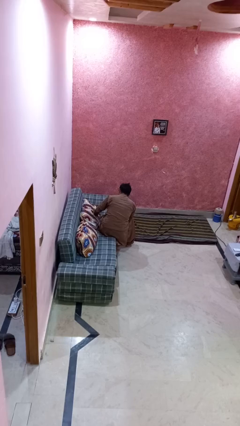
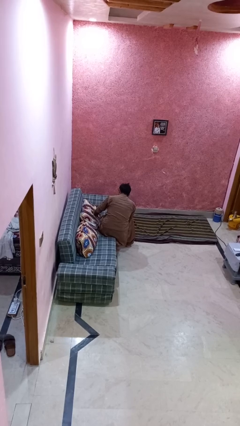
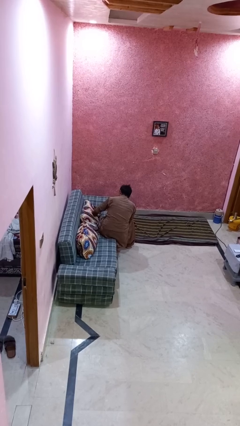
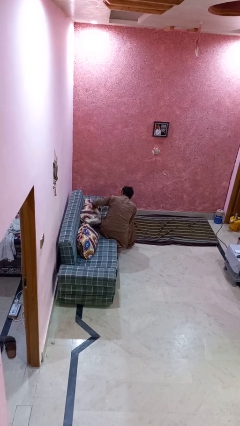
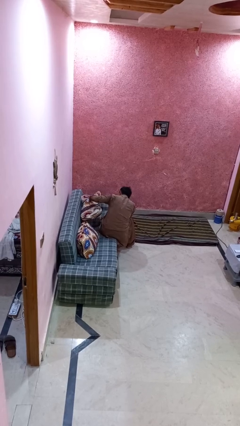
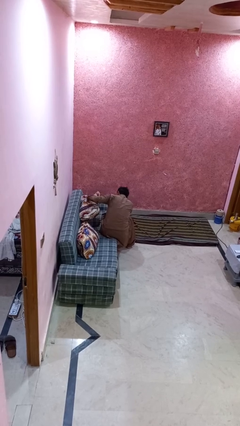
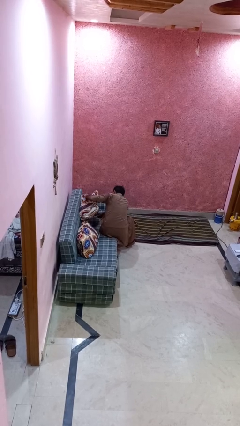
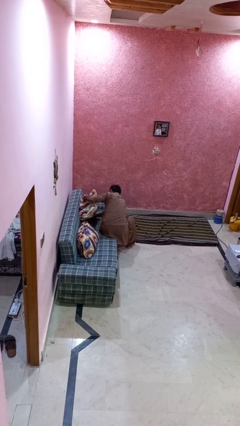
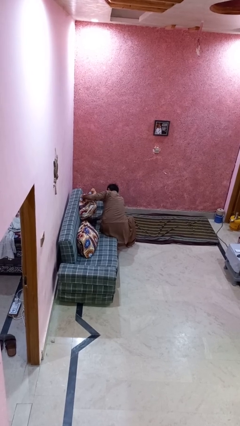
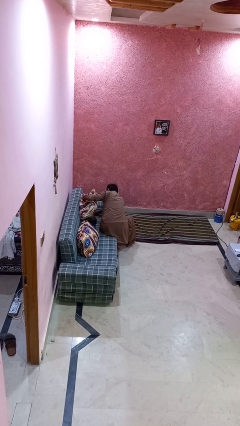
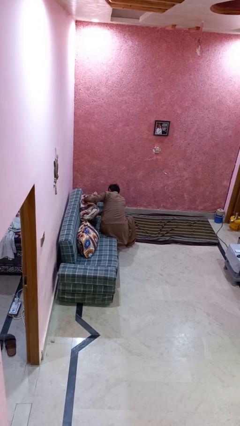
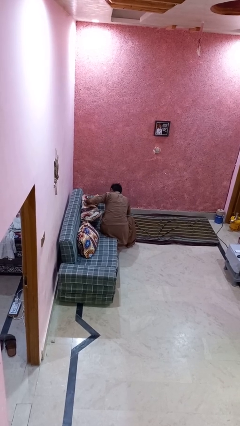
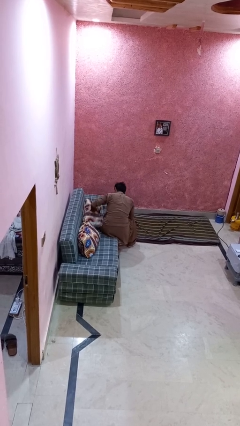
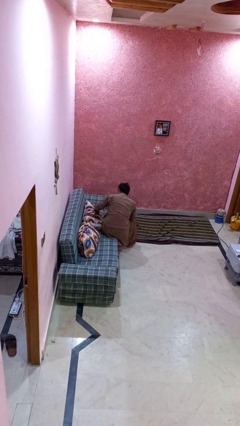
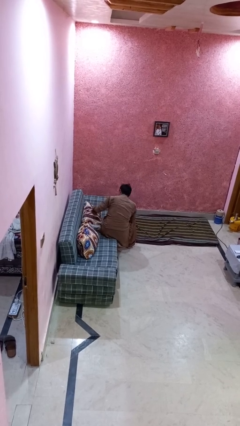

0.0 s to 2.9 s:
person searches in couch

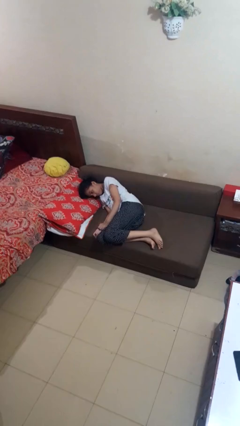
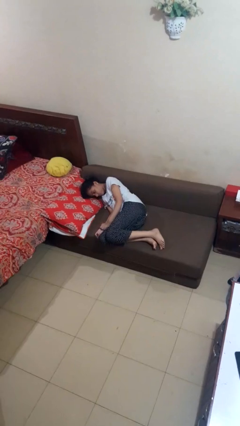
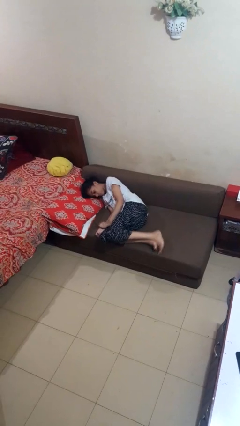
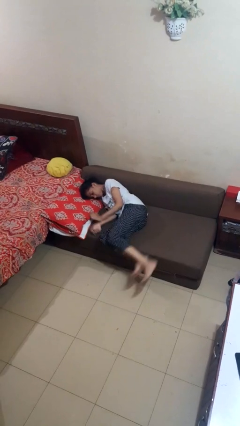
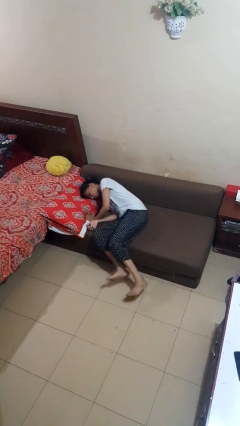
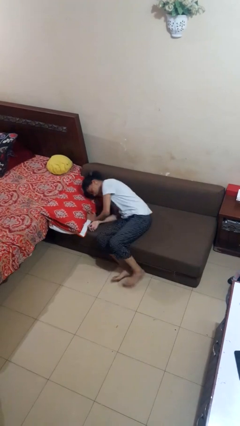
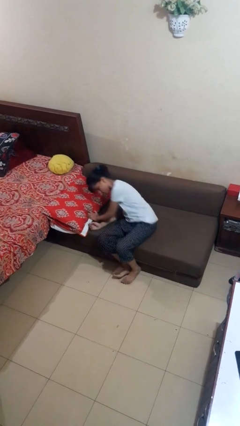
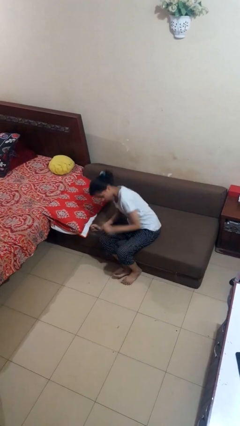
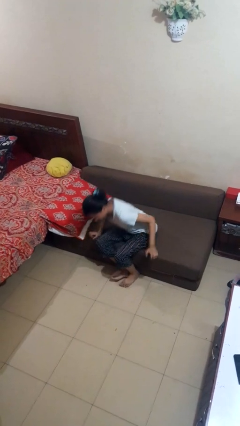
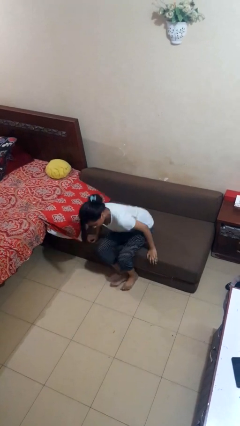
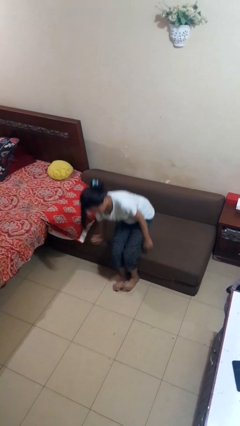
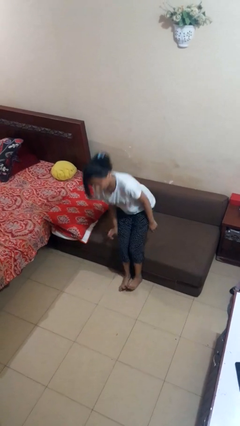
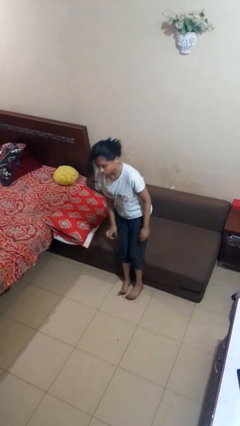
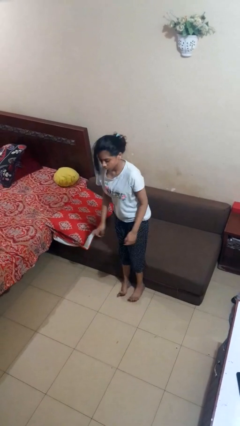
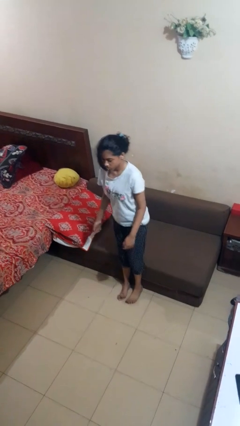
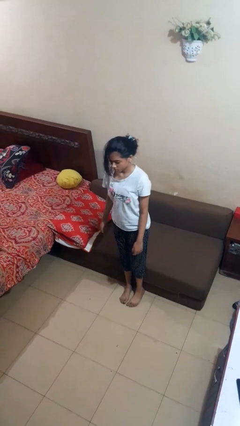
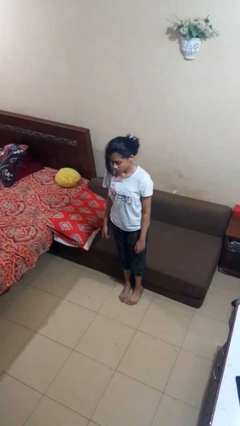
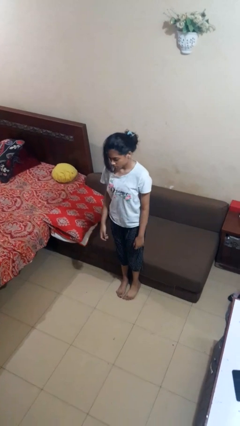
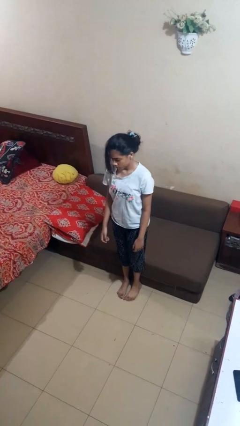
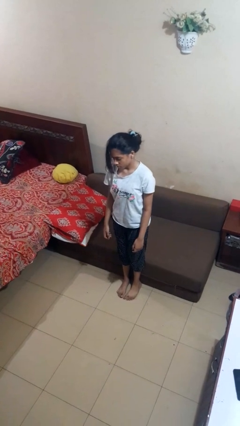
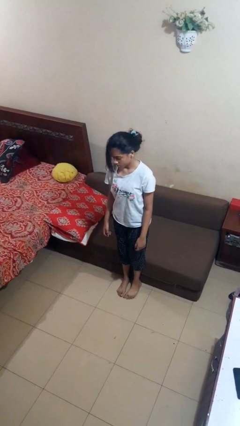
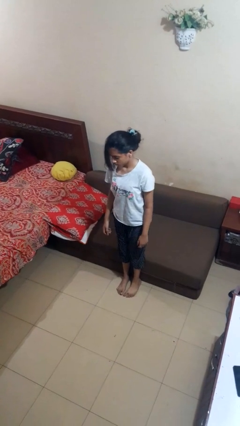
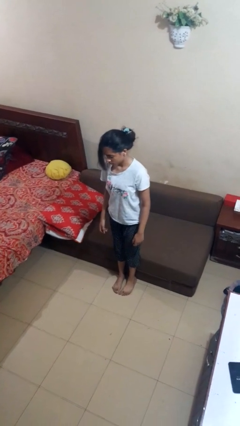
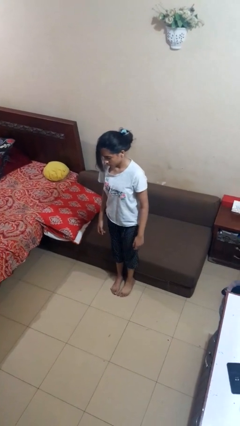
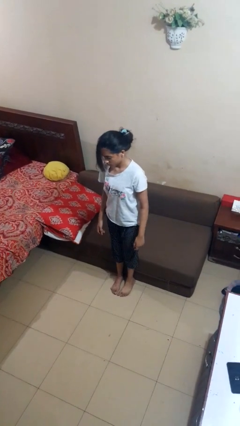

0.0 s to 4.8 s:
person stands up

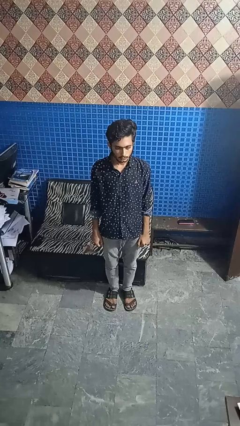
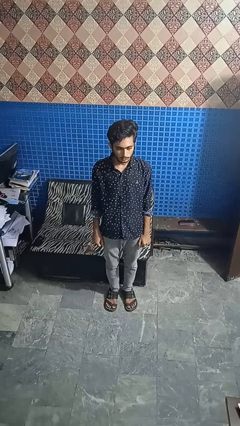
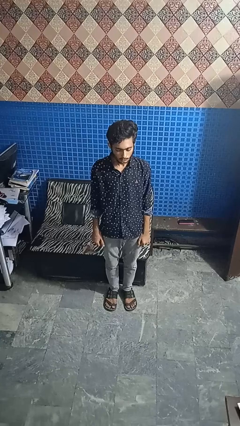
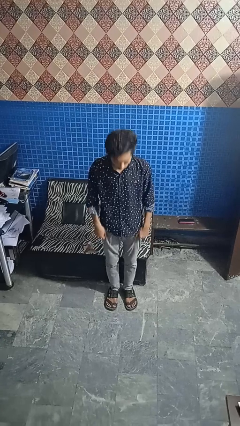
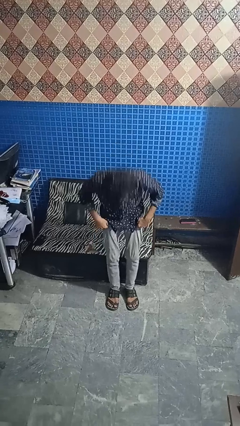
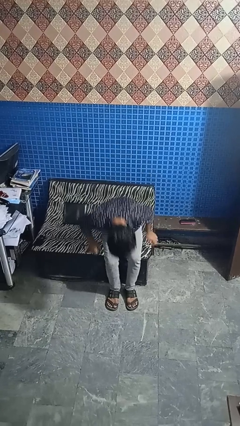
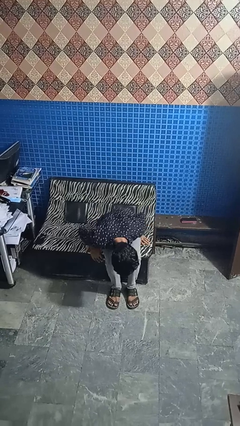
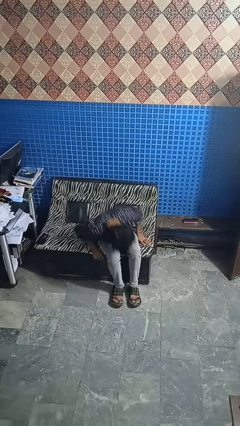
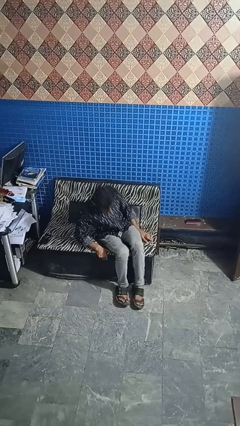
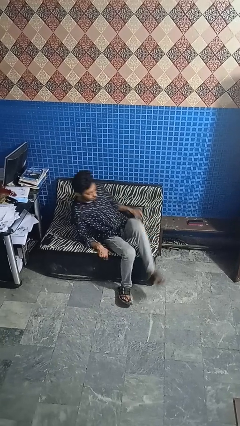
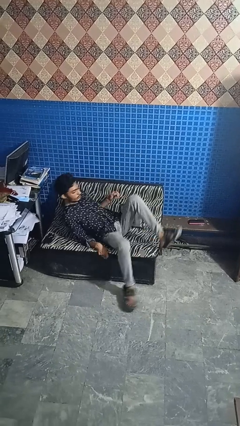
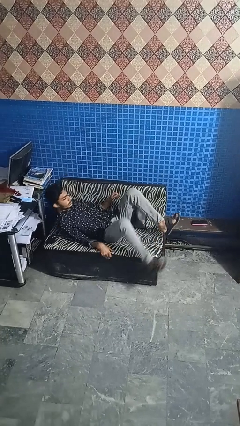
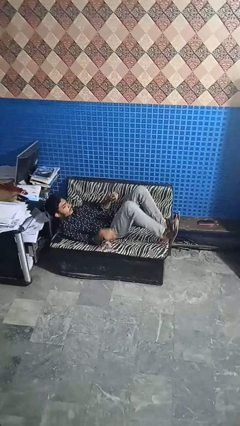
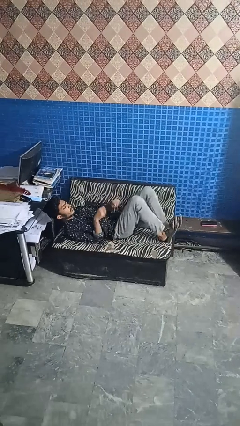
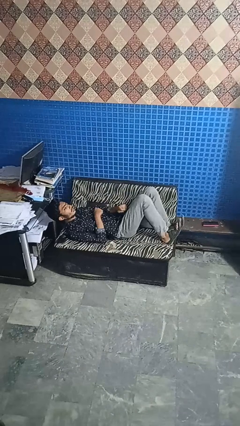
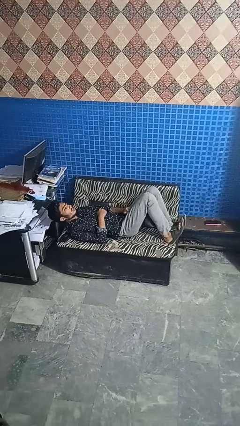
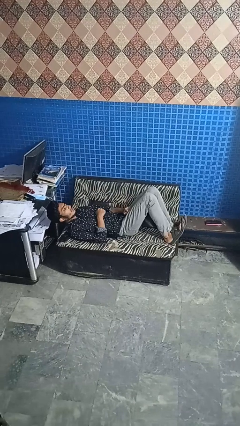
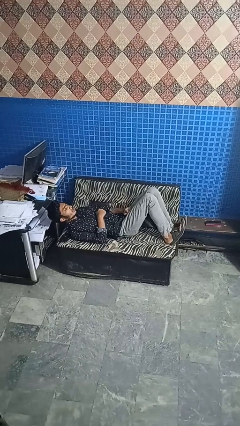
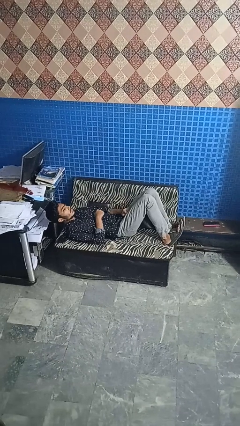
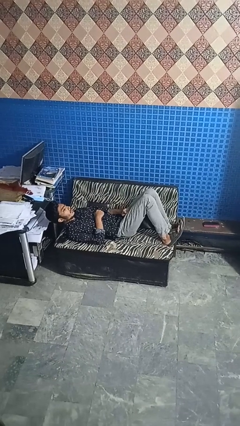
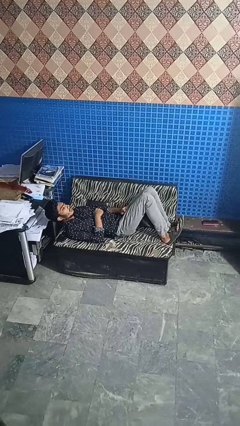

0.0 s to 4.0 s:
person lies down on couch

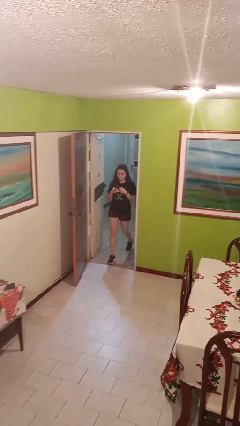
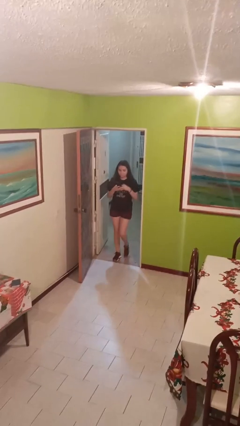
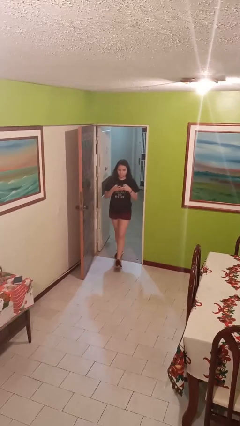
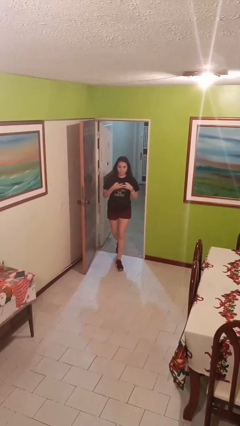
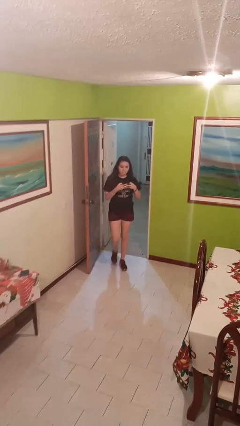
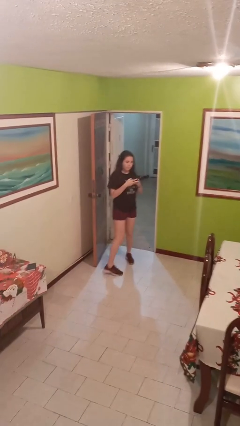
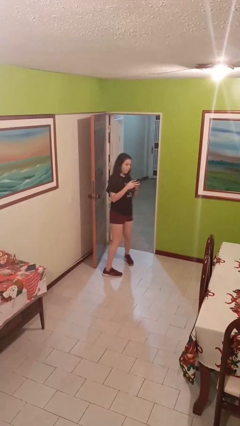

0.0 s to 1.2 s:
person enters scene through structure

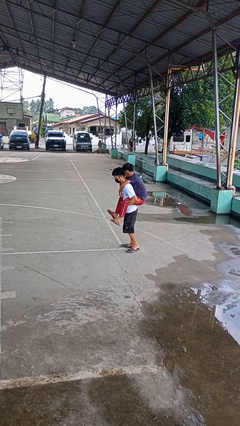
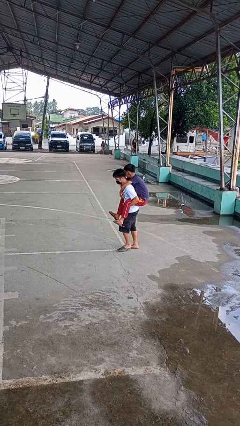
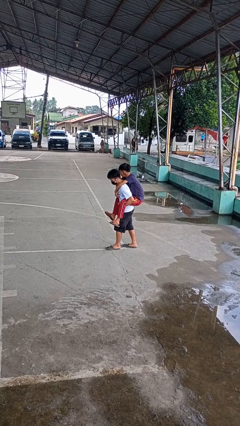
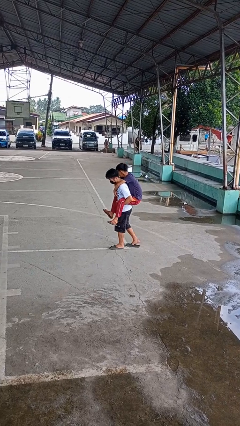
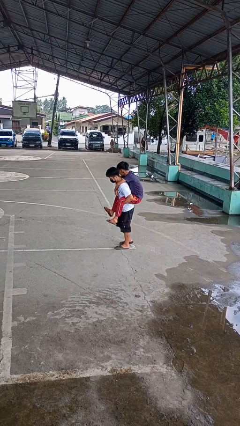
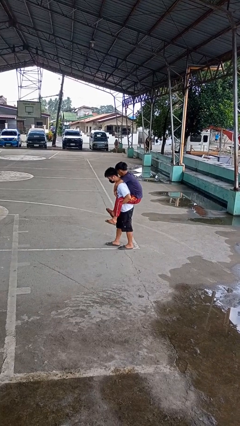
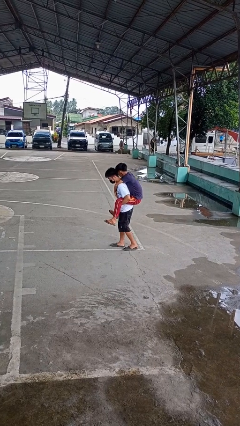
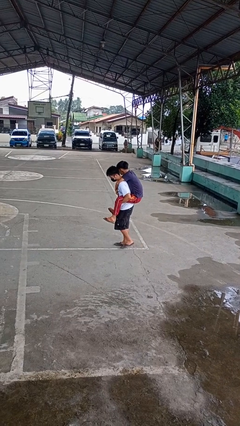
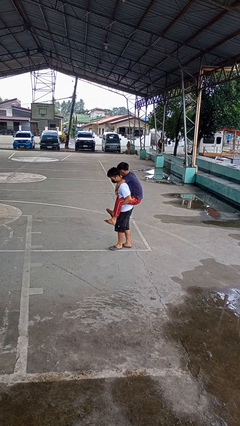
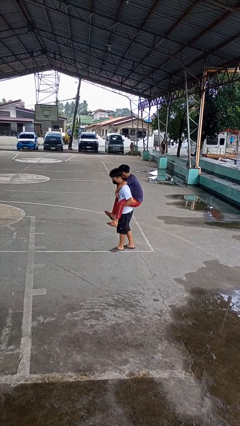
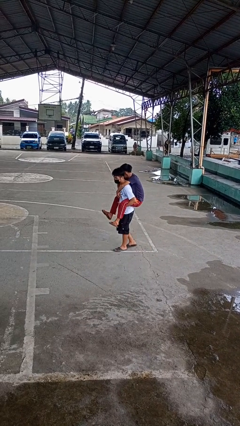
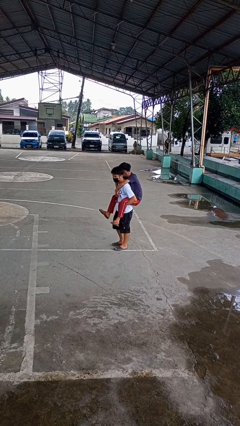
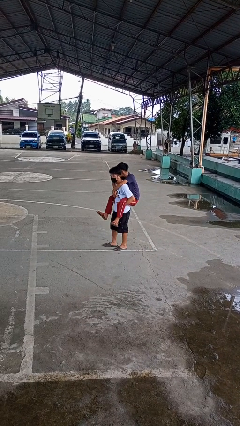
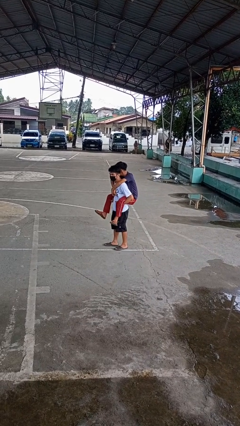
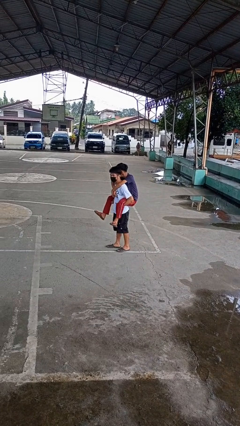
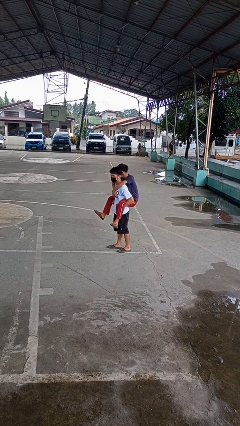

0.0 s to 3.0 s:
person carries person on back

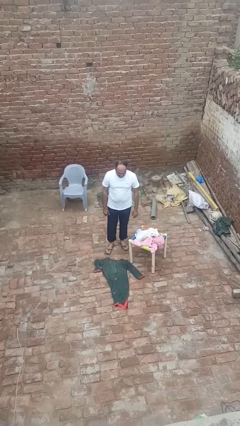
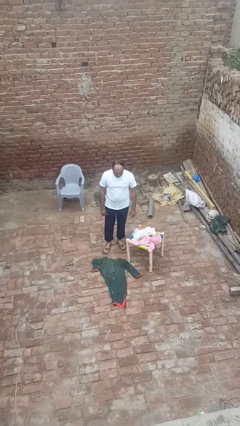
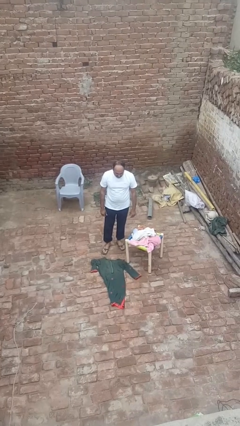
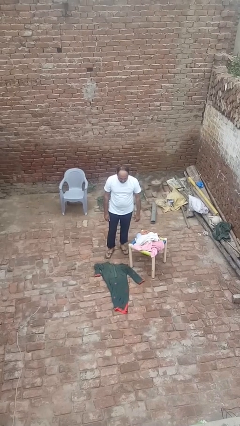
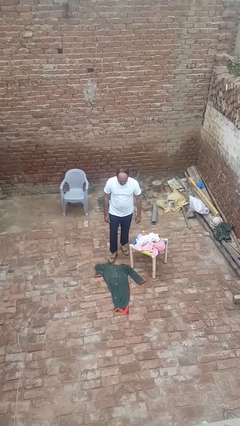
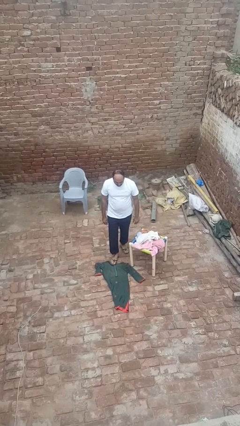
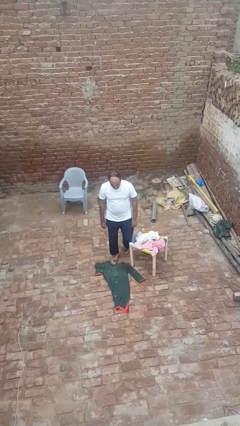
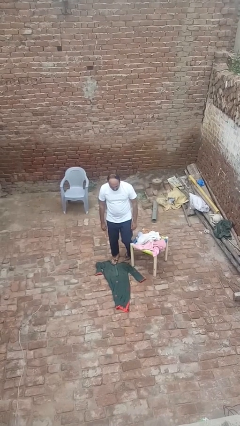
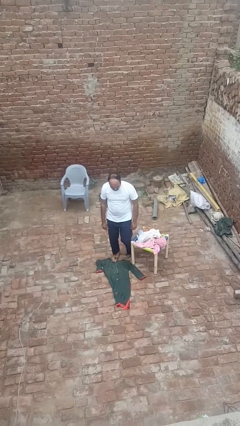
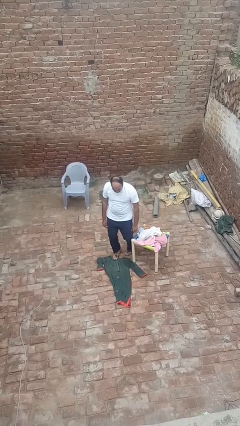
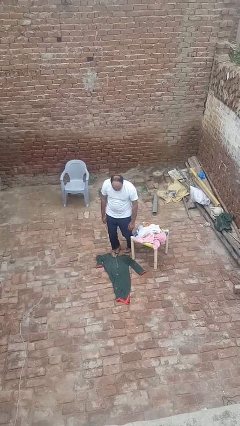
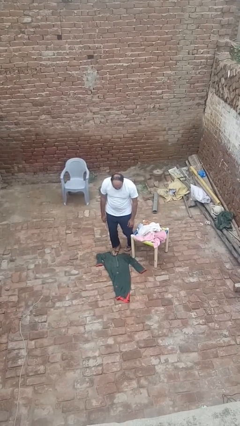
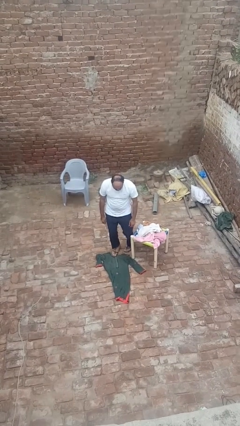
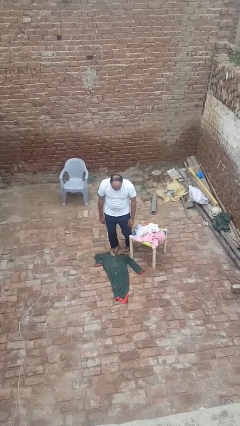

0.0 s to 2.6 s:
person trips on object on floor
